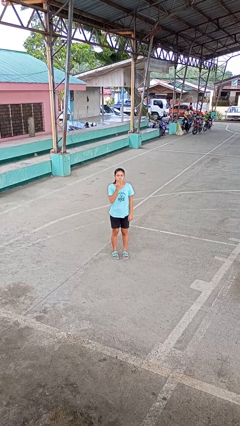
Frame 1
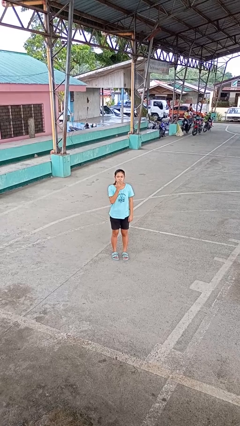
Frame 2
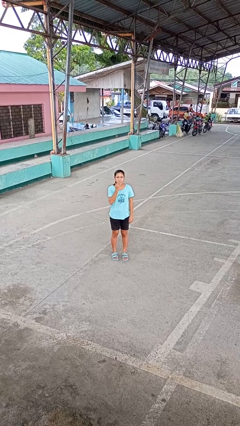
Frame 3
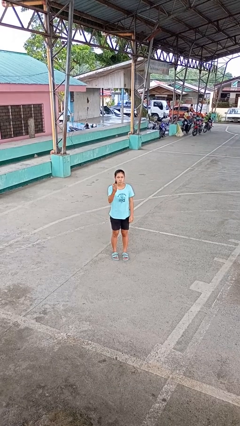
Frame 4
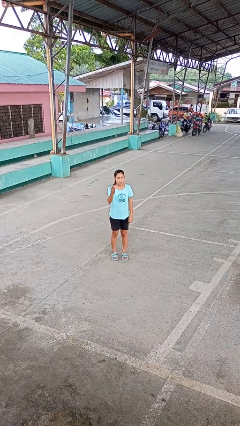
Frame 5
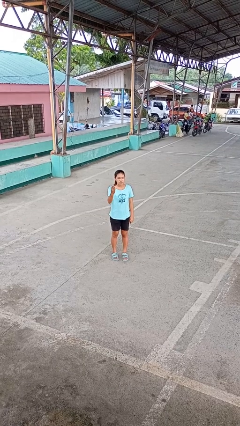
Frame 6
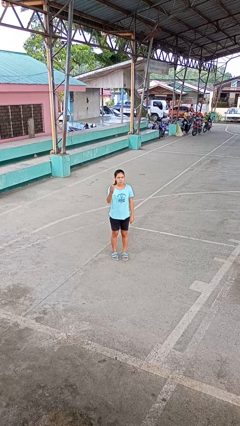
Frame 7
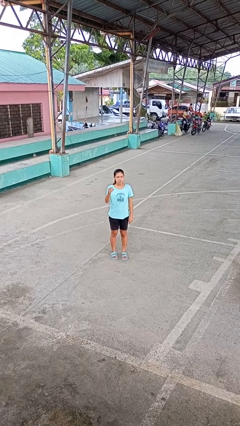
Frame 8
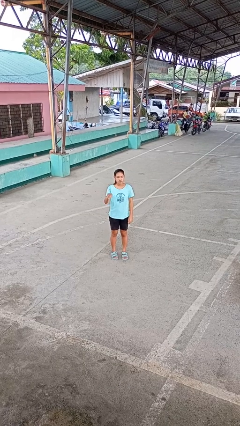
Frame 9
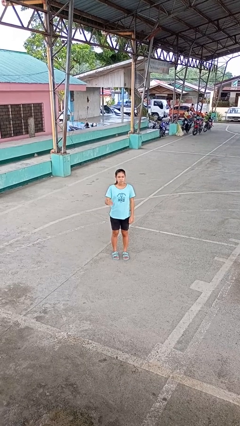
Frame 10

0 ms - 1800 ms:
person gestures blow kiss

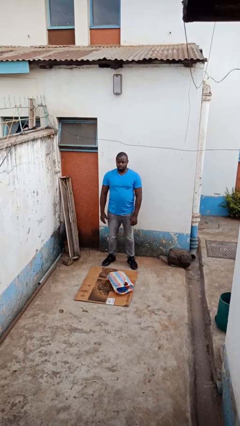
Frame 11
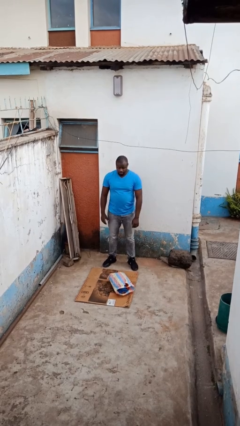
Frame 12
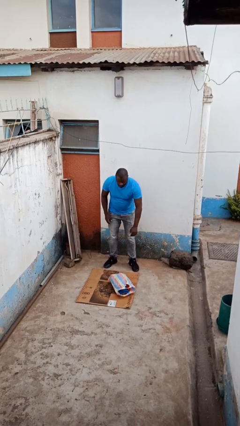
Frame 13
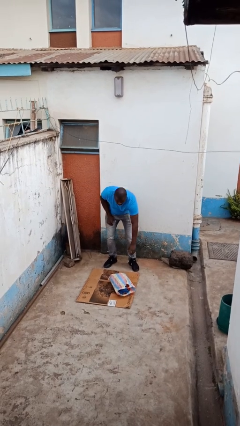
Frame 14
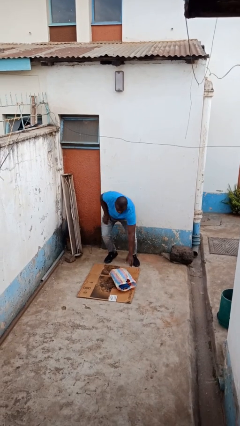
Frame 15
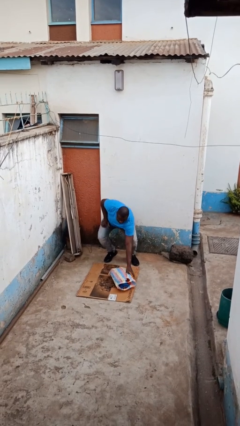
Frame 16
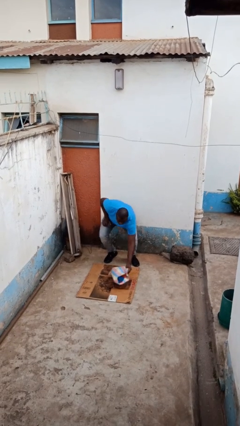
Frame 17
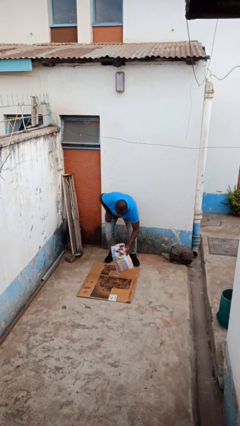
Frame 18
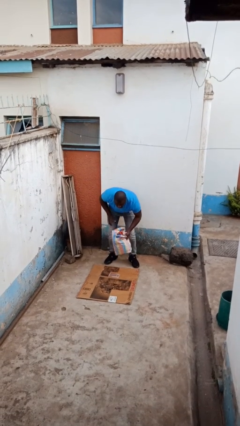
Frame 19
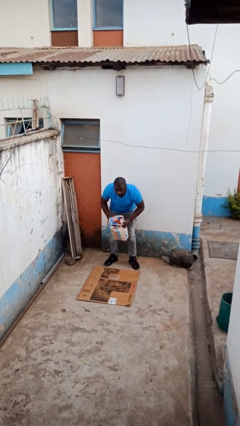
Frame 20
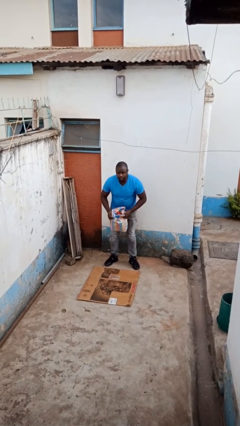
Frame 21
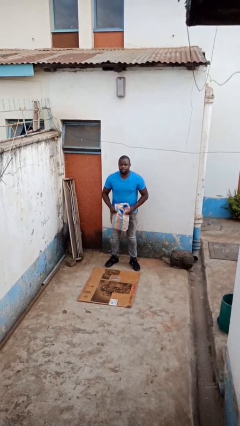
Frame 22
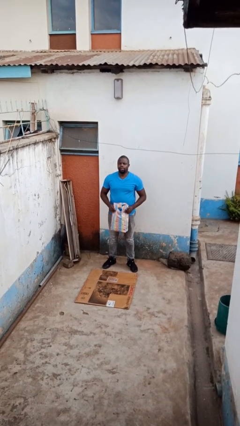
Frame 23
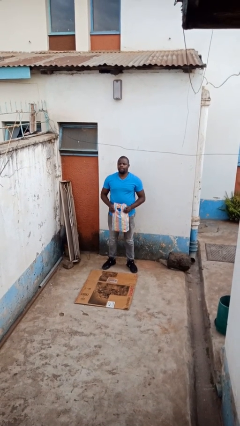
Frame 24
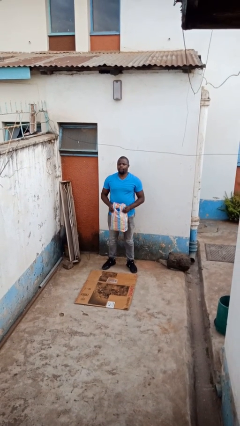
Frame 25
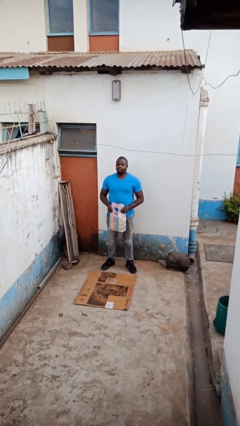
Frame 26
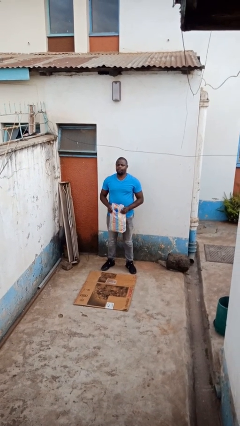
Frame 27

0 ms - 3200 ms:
person picks up object from floor

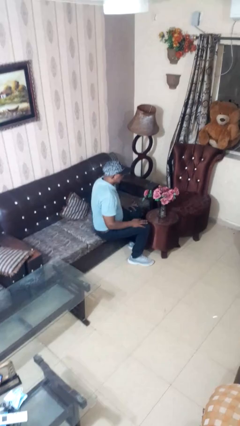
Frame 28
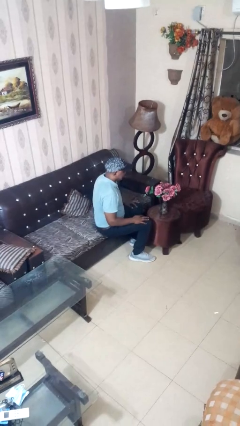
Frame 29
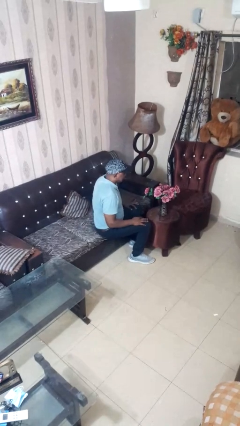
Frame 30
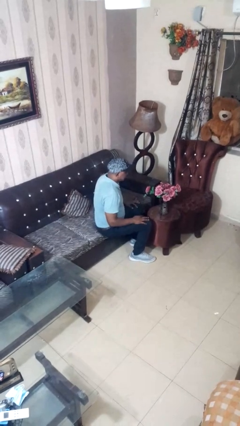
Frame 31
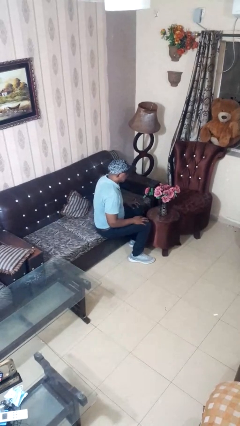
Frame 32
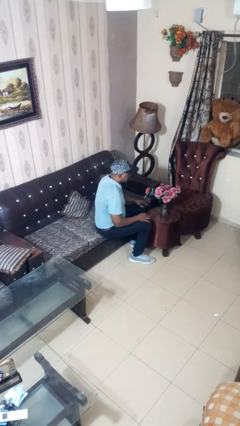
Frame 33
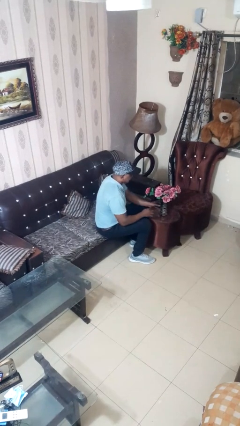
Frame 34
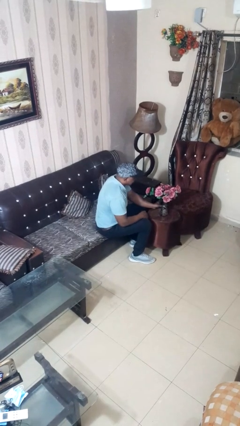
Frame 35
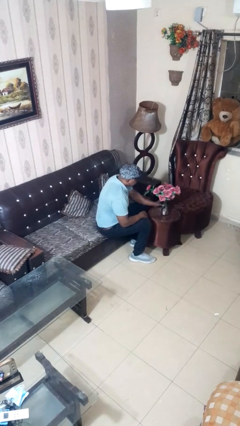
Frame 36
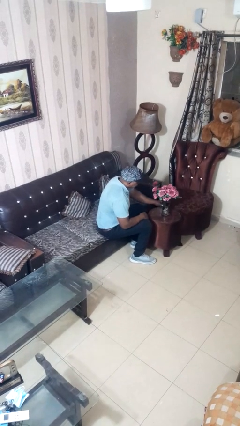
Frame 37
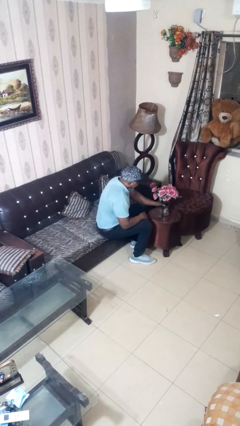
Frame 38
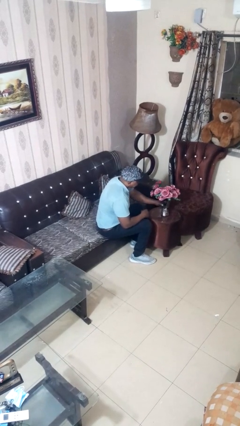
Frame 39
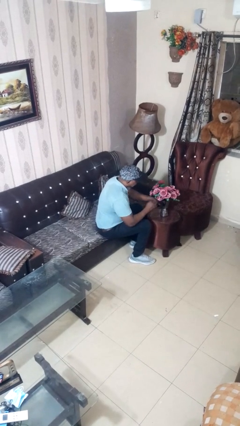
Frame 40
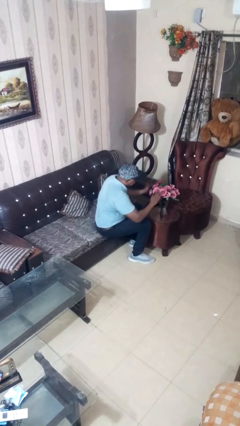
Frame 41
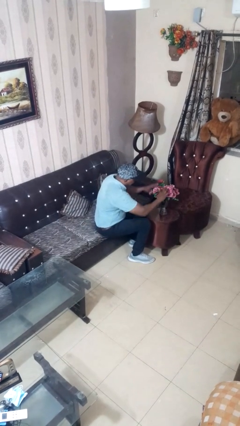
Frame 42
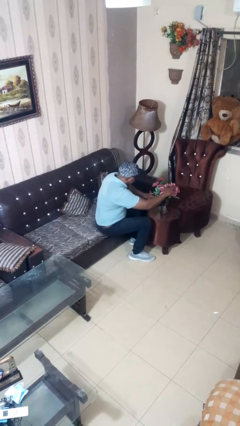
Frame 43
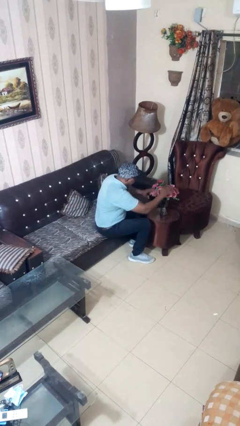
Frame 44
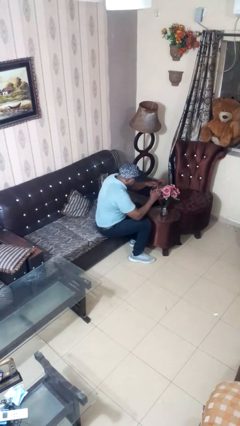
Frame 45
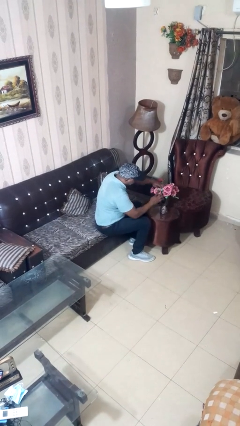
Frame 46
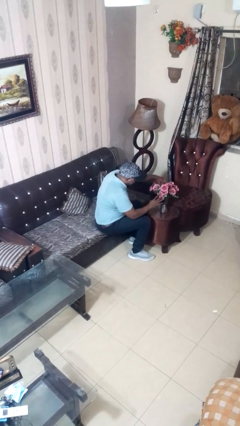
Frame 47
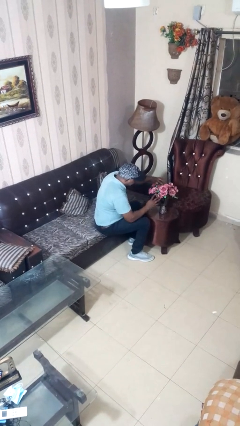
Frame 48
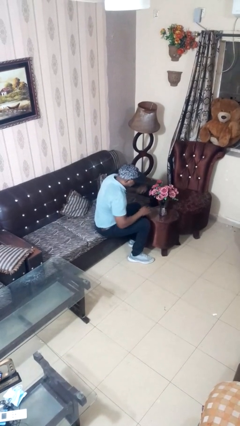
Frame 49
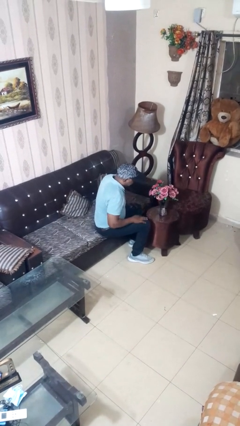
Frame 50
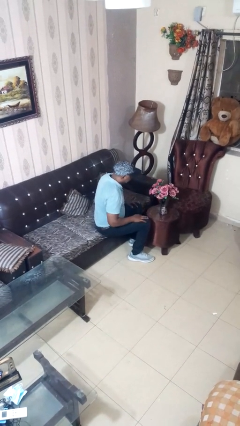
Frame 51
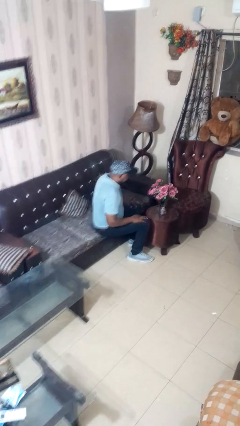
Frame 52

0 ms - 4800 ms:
person arranges flowers in vase

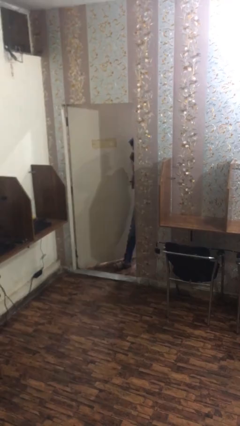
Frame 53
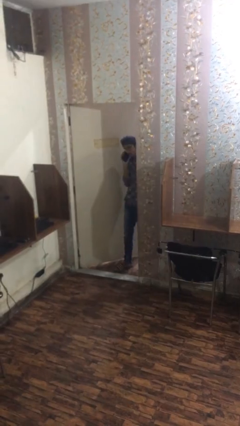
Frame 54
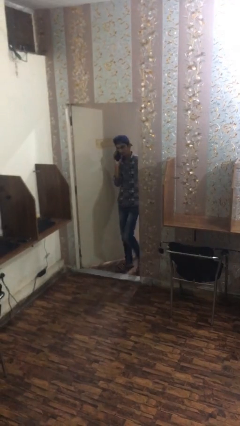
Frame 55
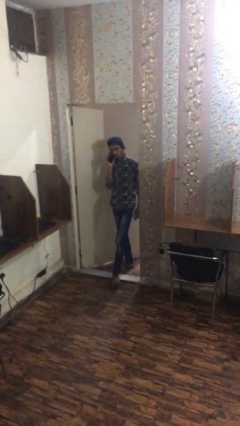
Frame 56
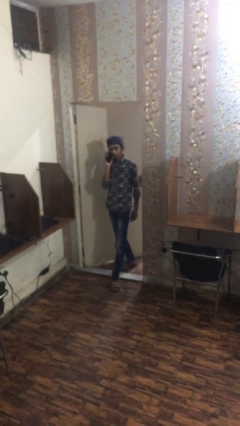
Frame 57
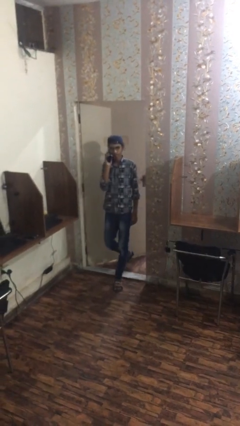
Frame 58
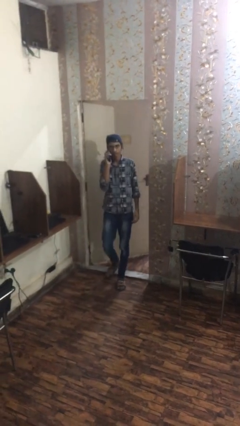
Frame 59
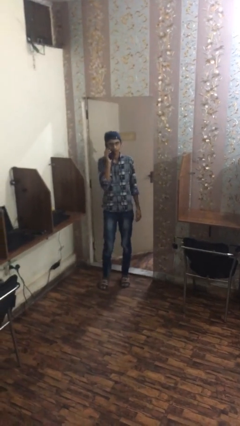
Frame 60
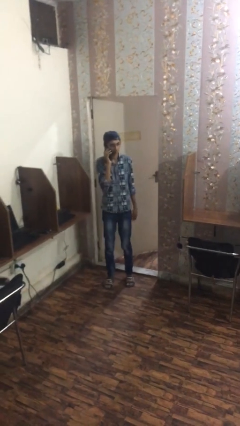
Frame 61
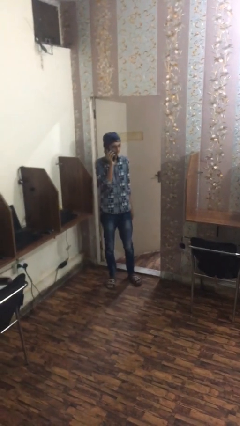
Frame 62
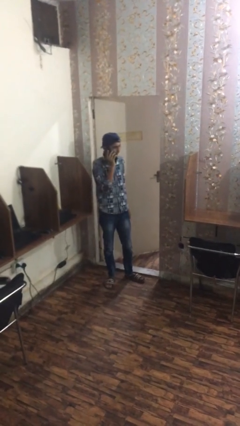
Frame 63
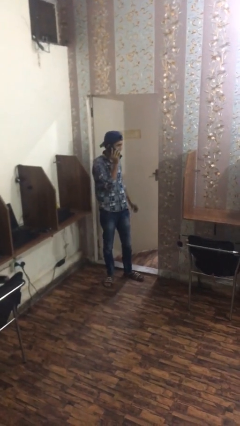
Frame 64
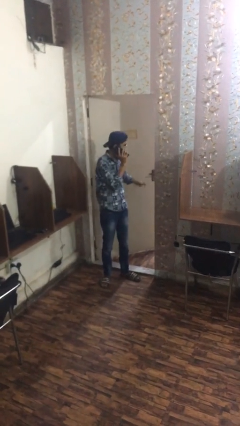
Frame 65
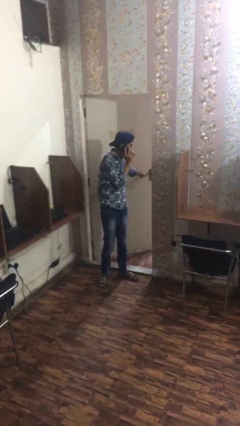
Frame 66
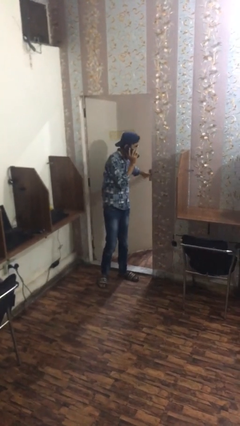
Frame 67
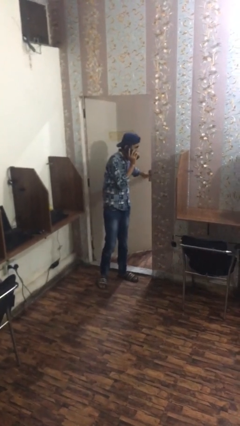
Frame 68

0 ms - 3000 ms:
person enters scene through structure

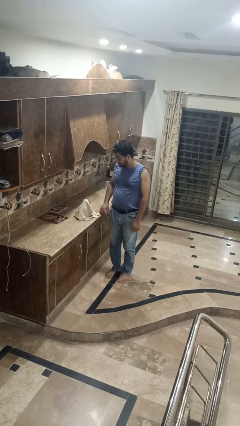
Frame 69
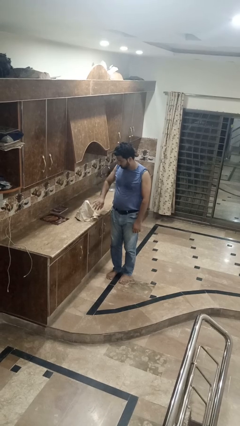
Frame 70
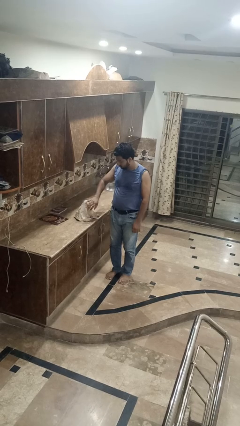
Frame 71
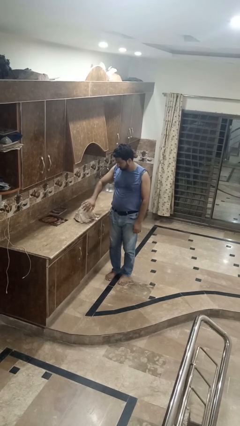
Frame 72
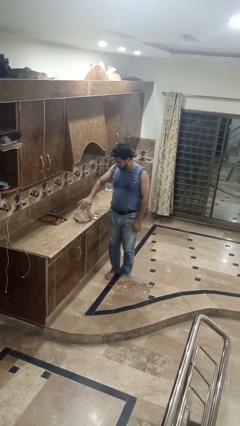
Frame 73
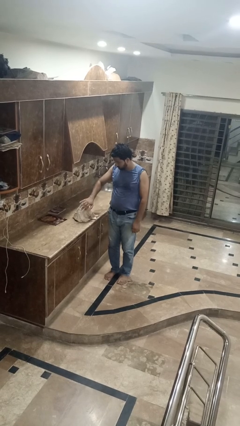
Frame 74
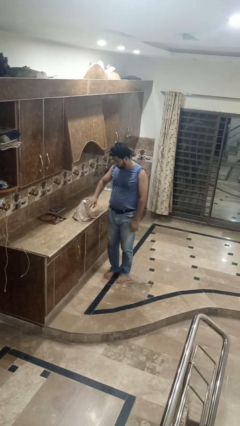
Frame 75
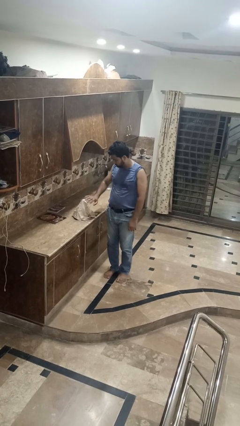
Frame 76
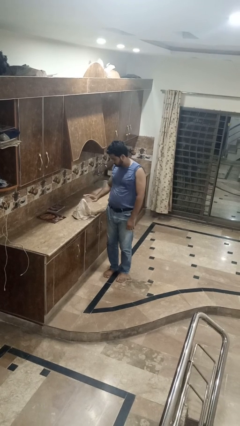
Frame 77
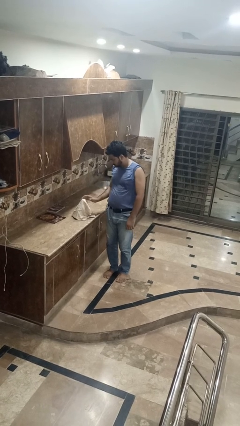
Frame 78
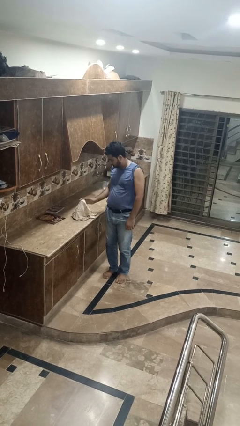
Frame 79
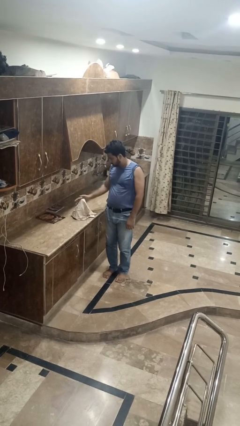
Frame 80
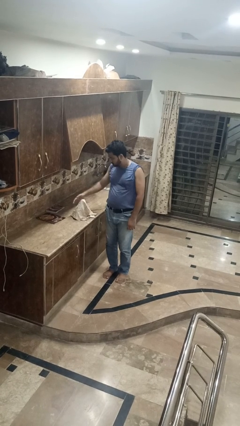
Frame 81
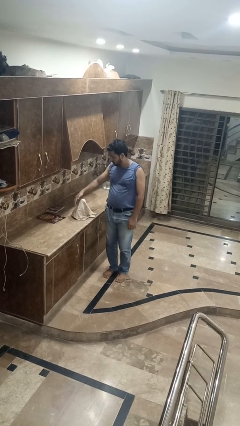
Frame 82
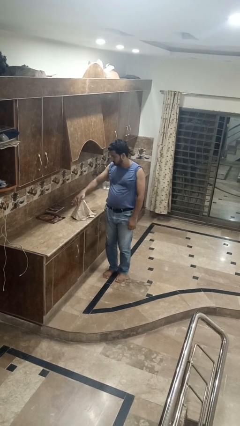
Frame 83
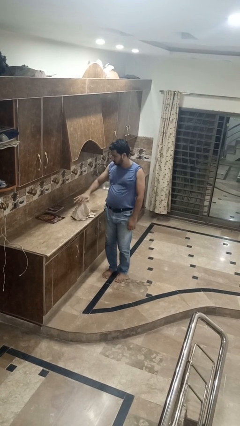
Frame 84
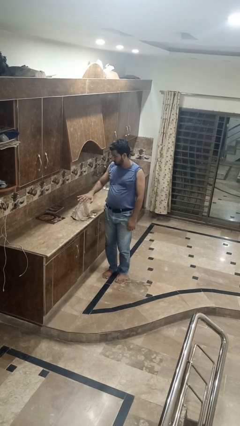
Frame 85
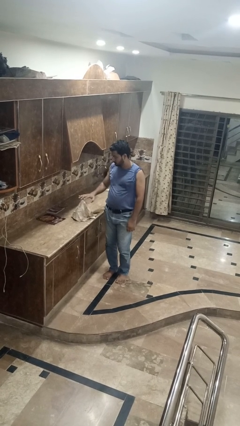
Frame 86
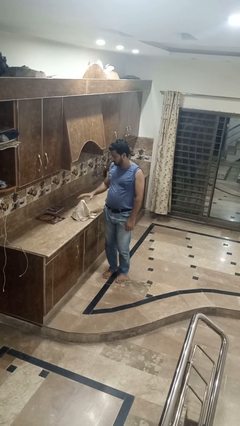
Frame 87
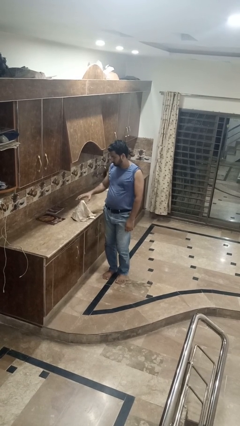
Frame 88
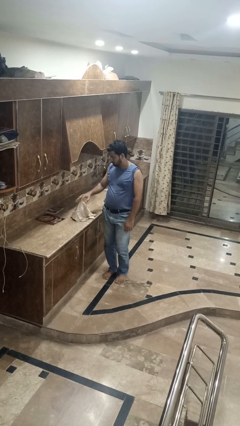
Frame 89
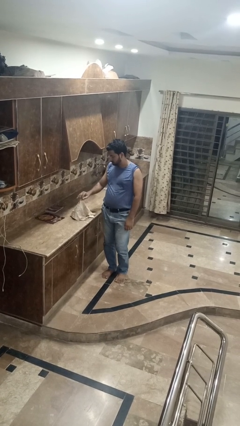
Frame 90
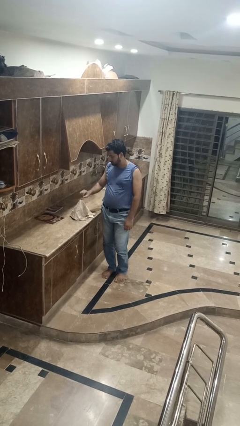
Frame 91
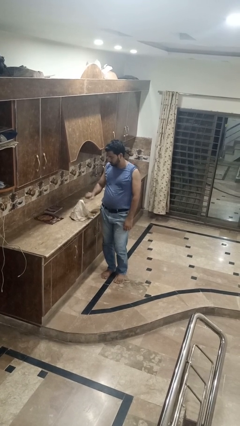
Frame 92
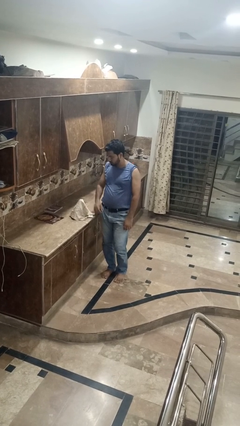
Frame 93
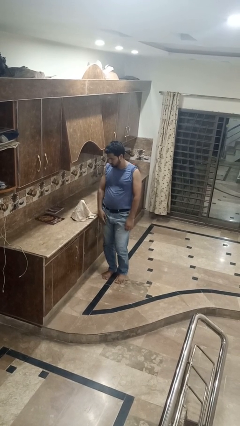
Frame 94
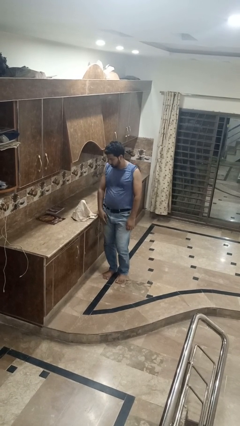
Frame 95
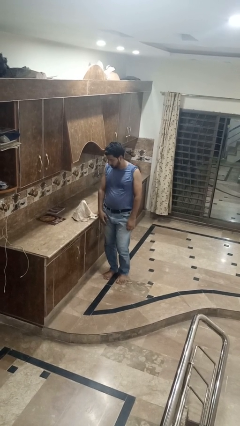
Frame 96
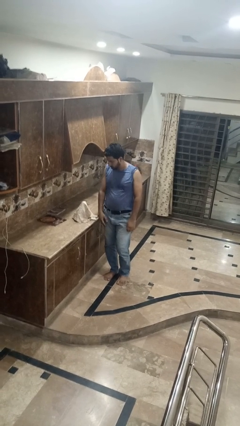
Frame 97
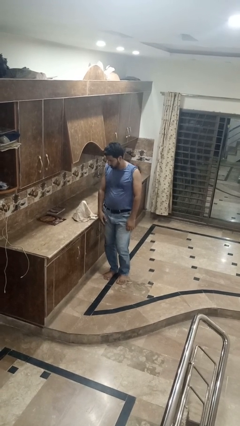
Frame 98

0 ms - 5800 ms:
person waves hand over object
